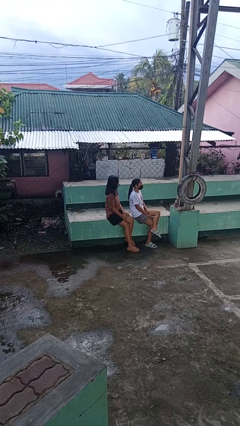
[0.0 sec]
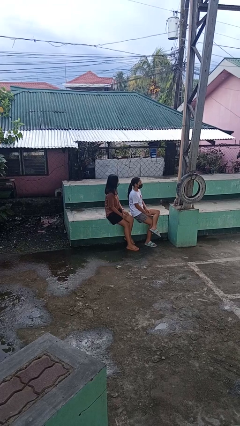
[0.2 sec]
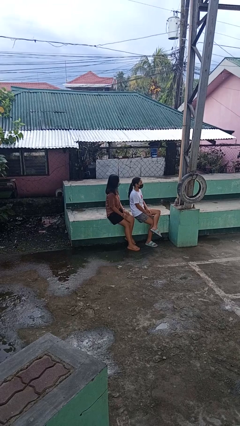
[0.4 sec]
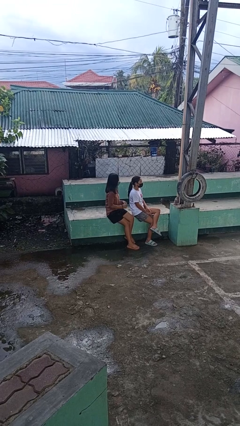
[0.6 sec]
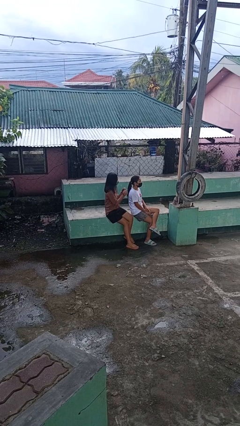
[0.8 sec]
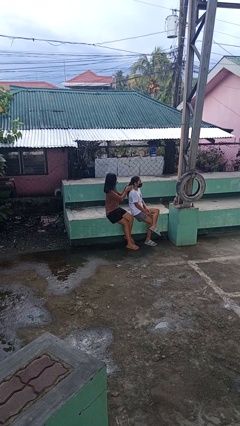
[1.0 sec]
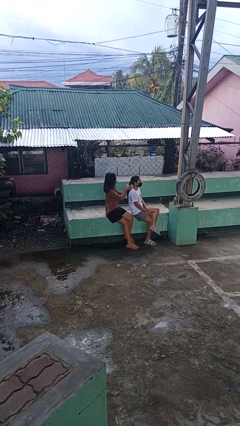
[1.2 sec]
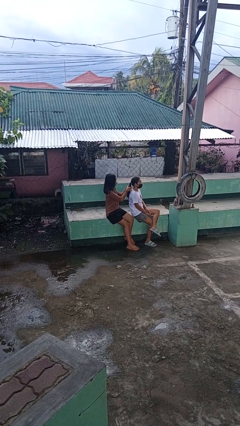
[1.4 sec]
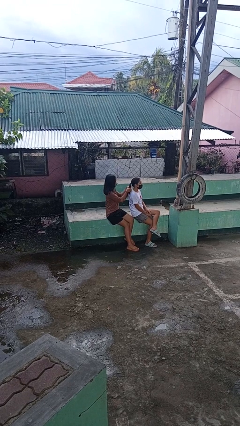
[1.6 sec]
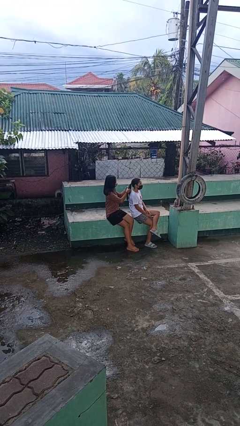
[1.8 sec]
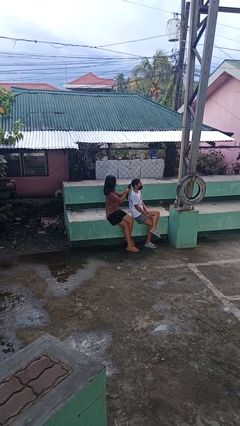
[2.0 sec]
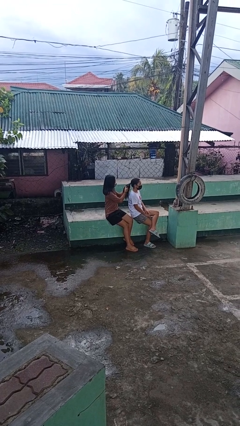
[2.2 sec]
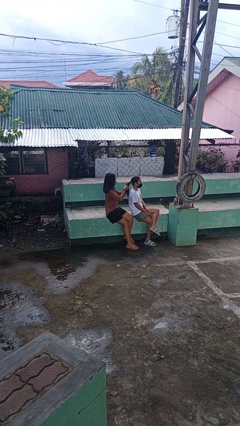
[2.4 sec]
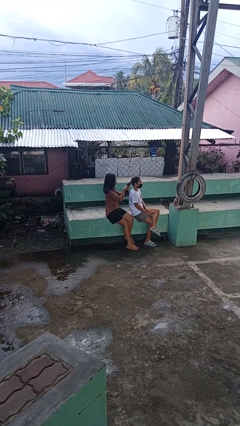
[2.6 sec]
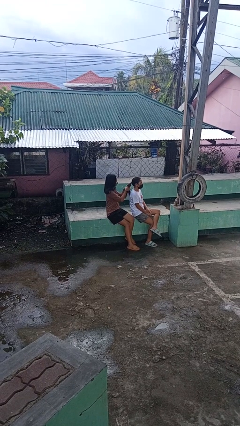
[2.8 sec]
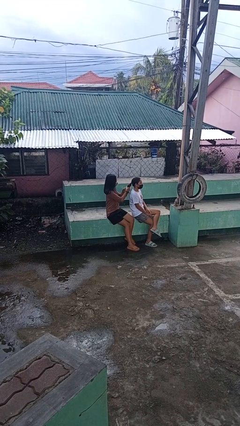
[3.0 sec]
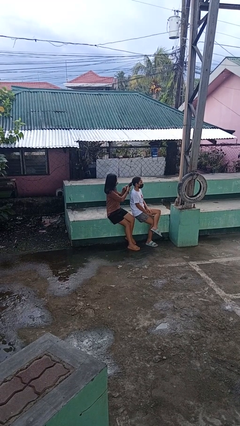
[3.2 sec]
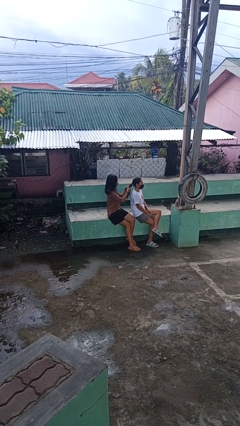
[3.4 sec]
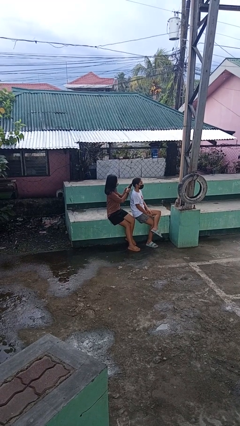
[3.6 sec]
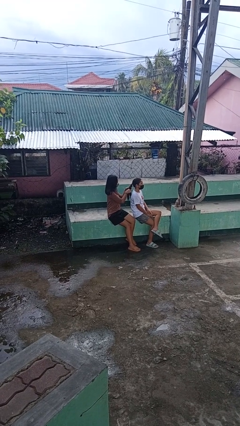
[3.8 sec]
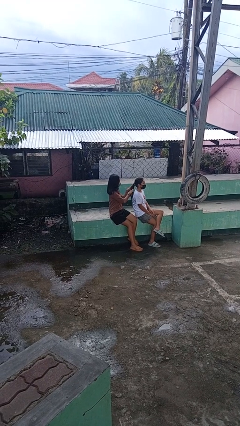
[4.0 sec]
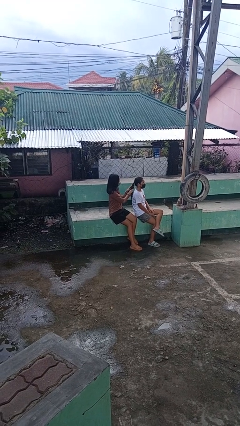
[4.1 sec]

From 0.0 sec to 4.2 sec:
person braids hair of person

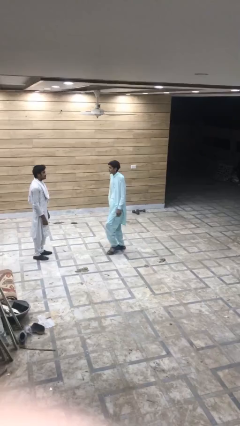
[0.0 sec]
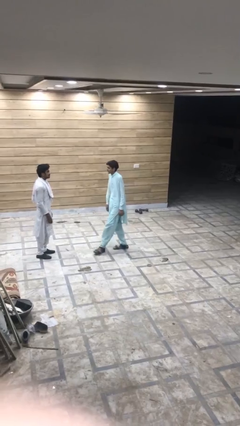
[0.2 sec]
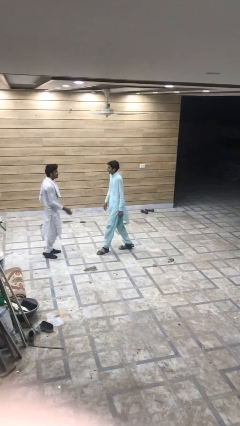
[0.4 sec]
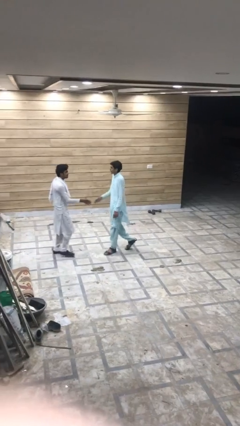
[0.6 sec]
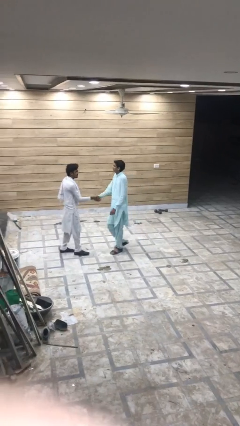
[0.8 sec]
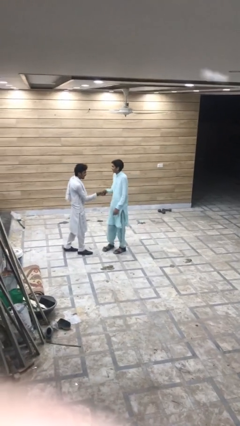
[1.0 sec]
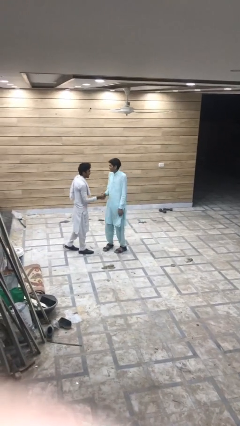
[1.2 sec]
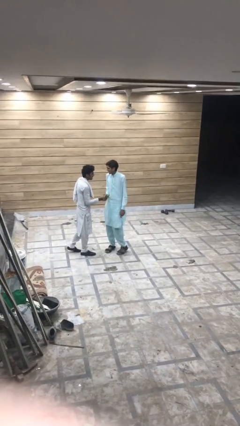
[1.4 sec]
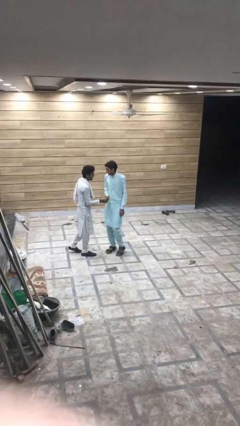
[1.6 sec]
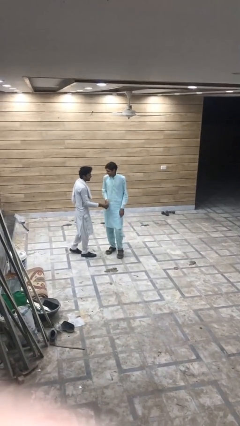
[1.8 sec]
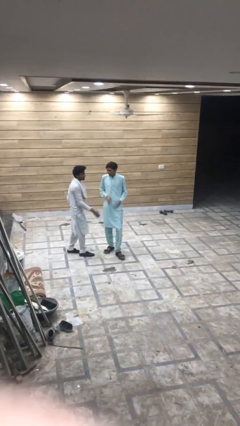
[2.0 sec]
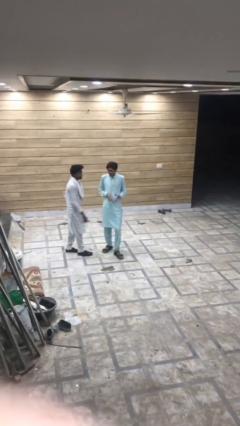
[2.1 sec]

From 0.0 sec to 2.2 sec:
person shakes hand

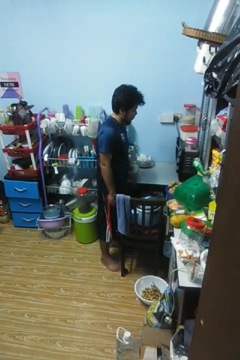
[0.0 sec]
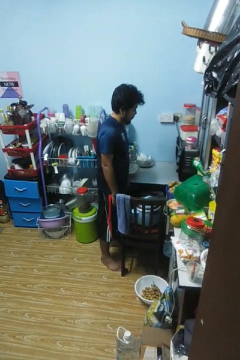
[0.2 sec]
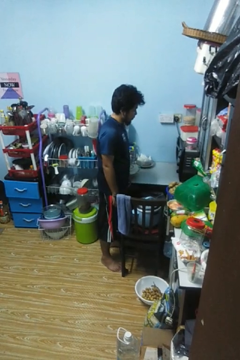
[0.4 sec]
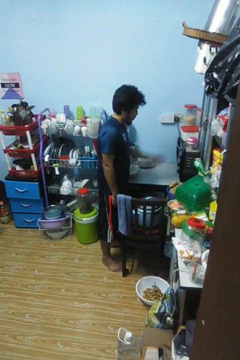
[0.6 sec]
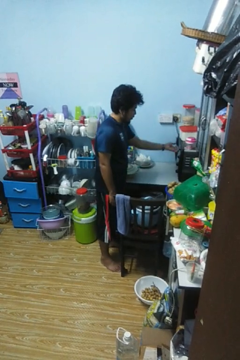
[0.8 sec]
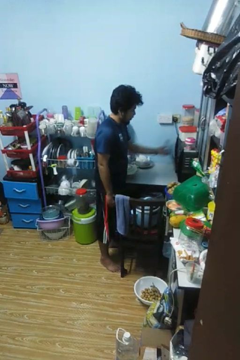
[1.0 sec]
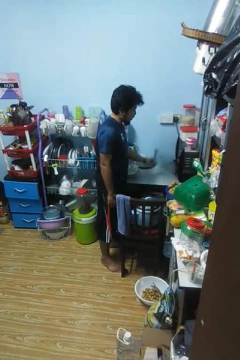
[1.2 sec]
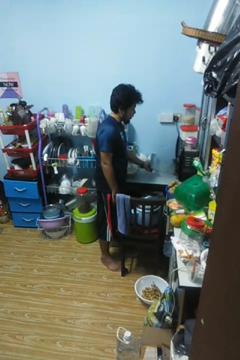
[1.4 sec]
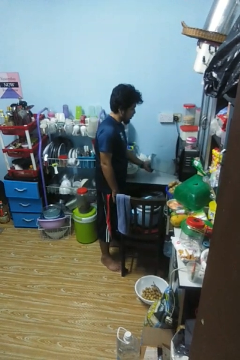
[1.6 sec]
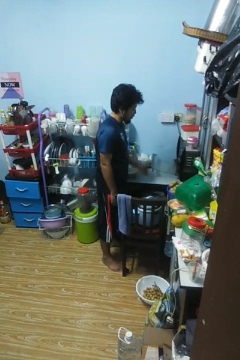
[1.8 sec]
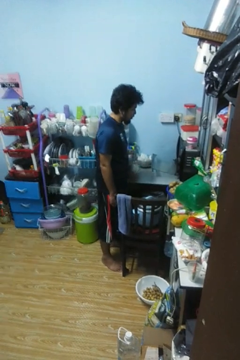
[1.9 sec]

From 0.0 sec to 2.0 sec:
person opens oven door

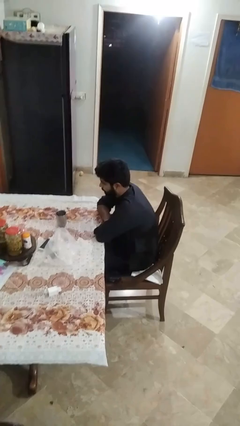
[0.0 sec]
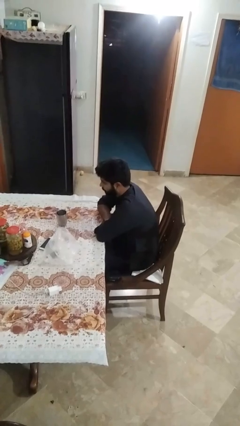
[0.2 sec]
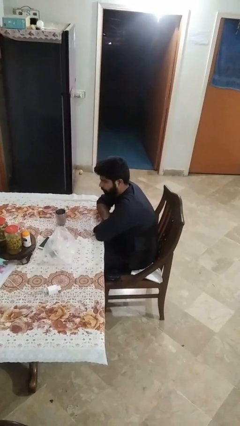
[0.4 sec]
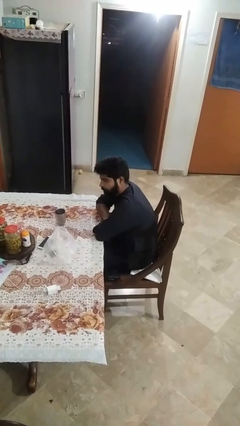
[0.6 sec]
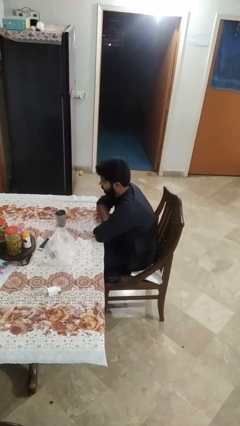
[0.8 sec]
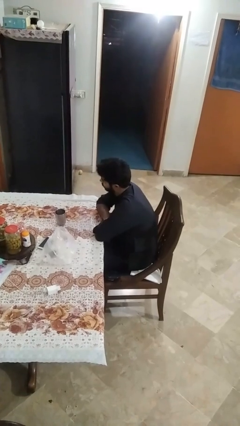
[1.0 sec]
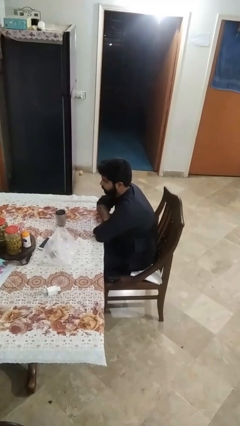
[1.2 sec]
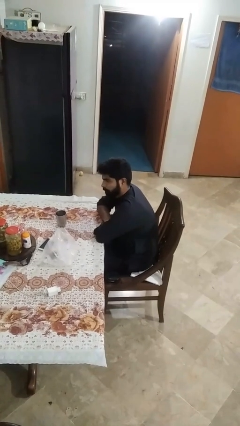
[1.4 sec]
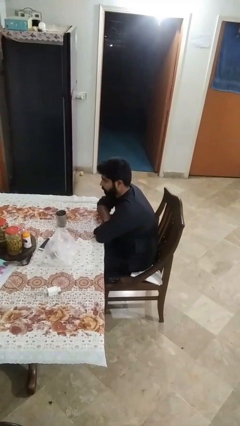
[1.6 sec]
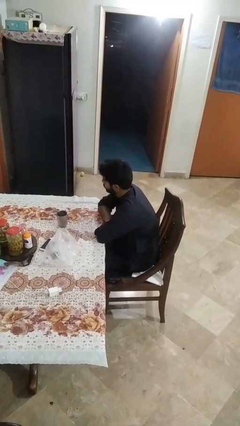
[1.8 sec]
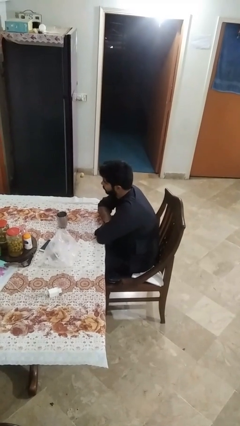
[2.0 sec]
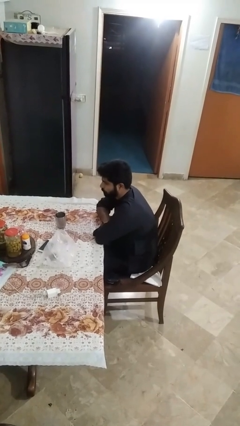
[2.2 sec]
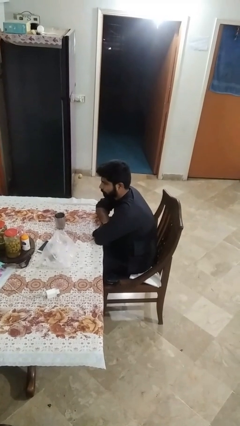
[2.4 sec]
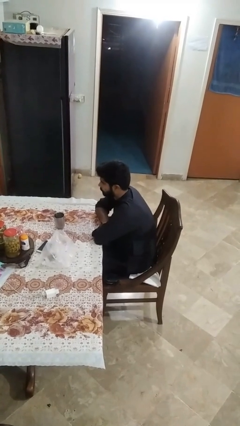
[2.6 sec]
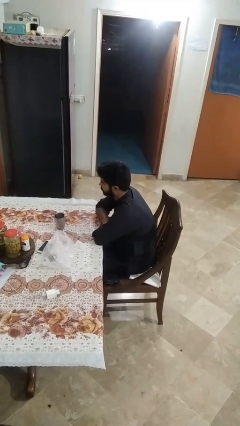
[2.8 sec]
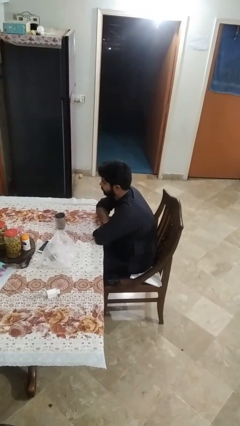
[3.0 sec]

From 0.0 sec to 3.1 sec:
person shakes head

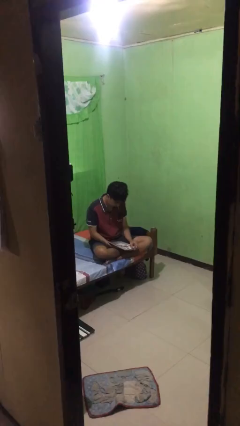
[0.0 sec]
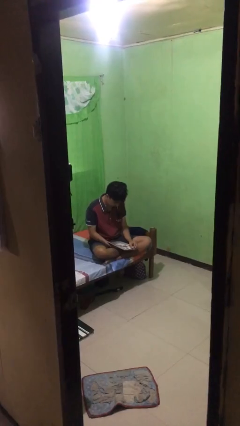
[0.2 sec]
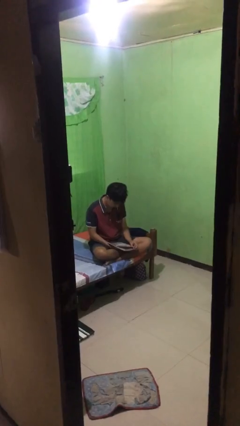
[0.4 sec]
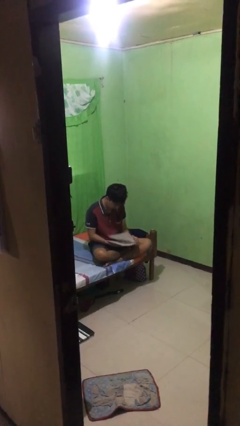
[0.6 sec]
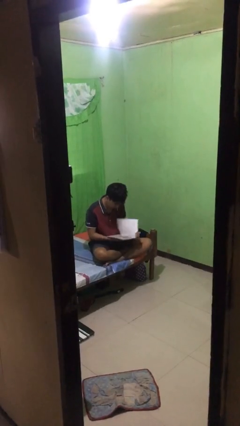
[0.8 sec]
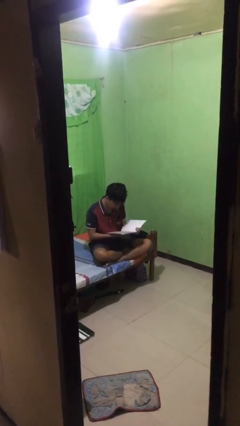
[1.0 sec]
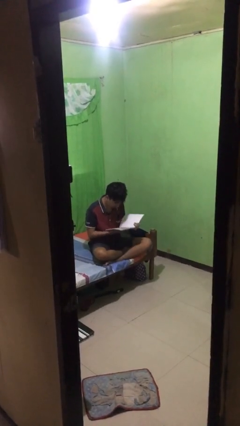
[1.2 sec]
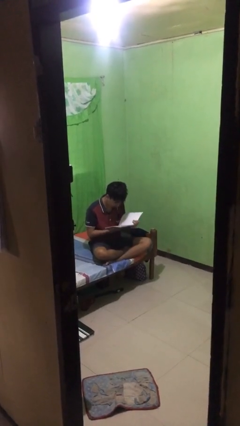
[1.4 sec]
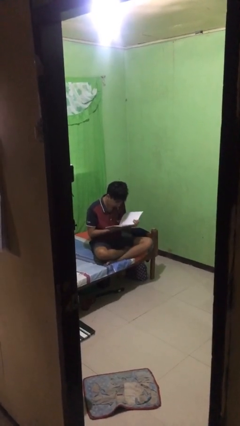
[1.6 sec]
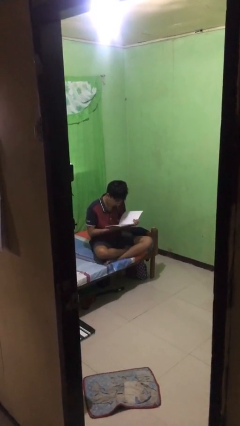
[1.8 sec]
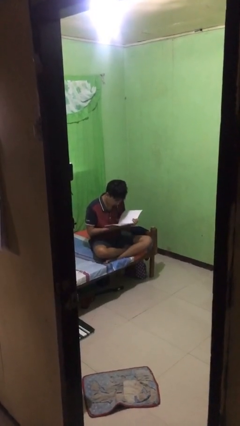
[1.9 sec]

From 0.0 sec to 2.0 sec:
person reads document

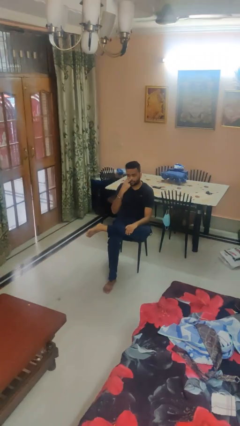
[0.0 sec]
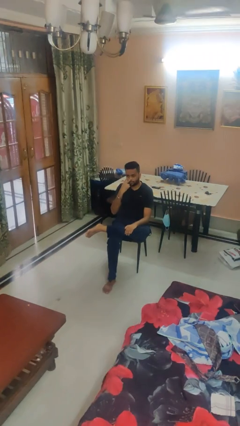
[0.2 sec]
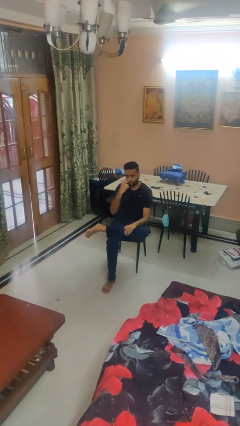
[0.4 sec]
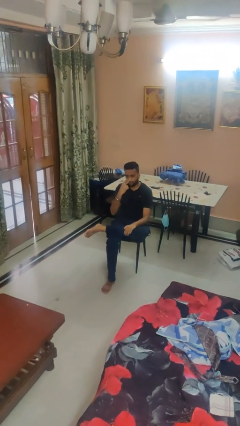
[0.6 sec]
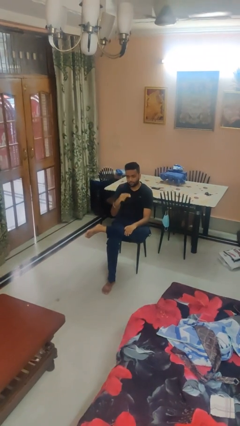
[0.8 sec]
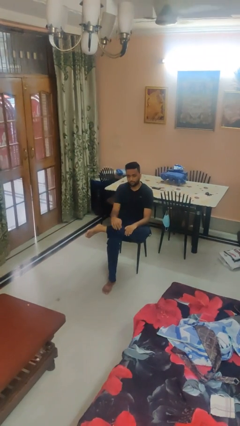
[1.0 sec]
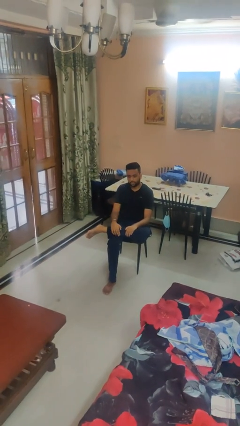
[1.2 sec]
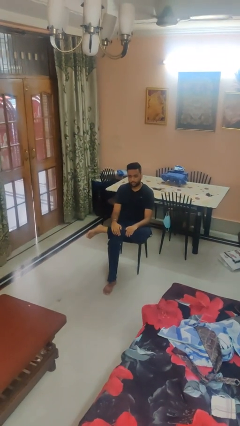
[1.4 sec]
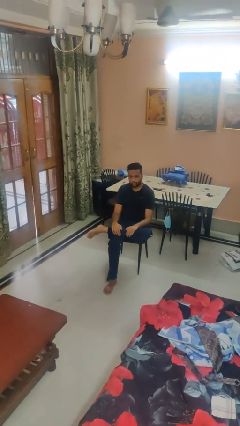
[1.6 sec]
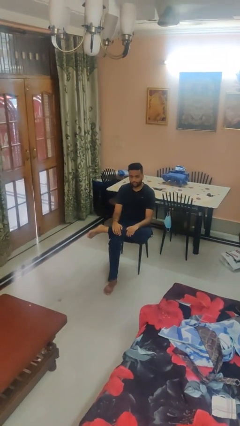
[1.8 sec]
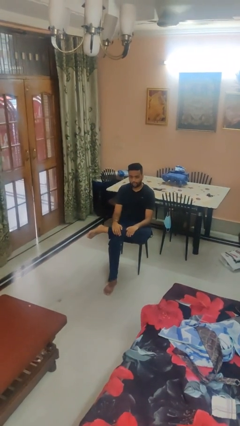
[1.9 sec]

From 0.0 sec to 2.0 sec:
person gestures watch closely

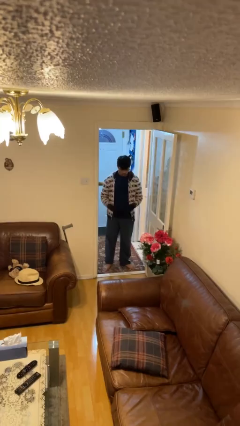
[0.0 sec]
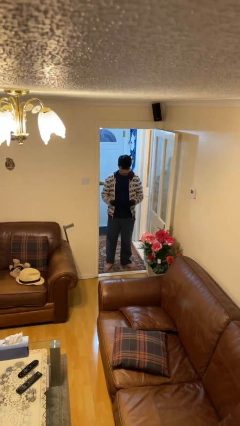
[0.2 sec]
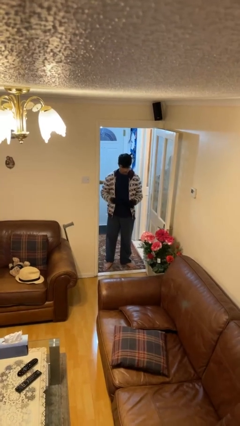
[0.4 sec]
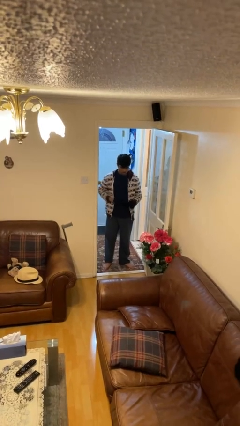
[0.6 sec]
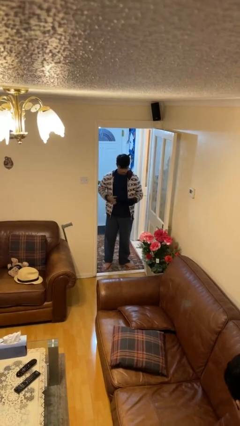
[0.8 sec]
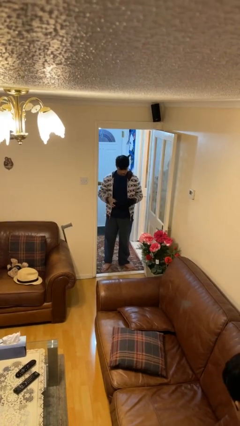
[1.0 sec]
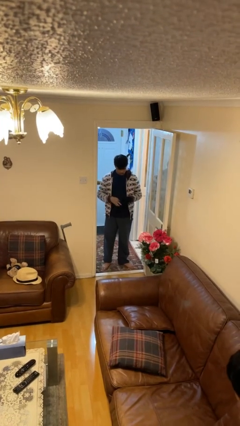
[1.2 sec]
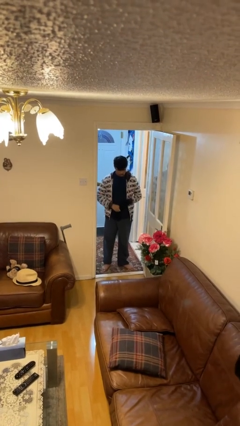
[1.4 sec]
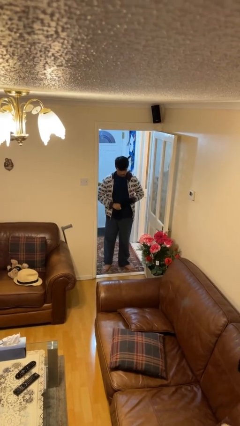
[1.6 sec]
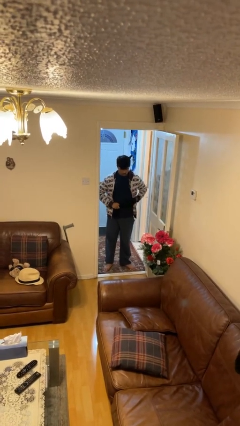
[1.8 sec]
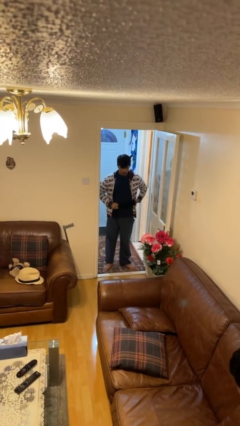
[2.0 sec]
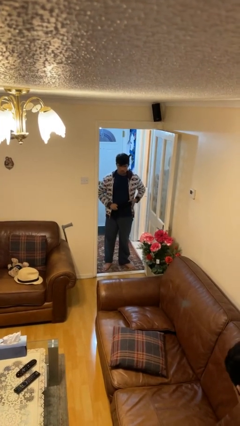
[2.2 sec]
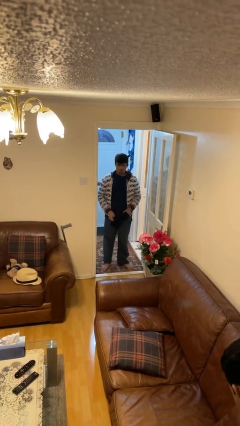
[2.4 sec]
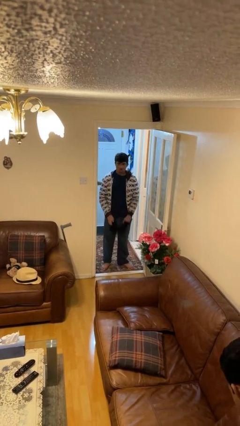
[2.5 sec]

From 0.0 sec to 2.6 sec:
person takes off gloves
